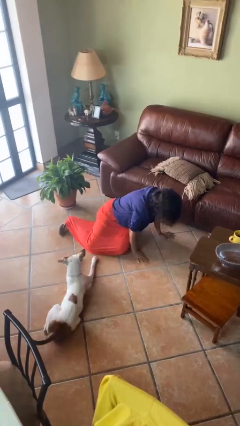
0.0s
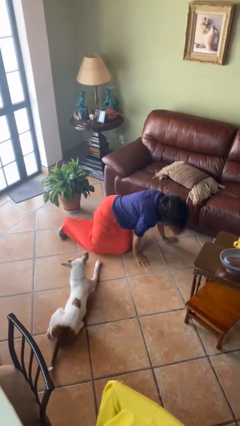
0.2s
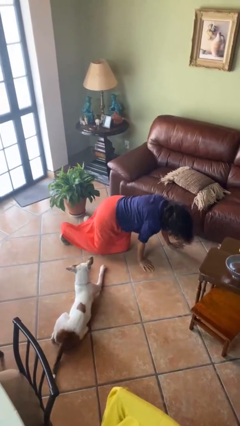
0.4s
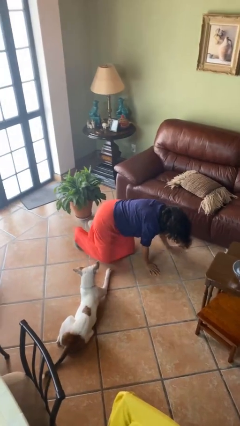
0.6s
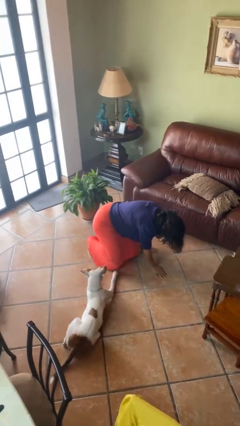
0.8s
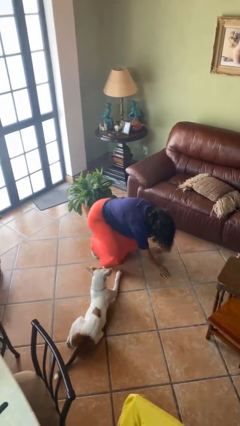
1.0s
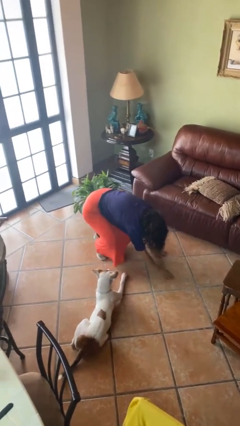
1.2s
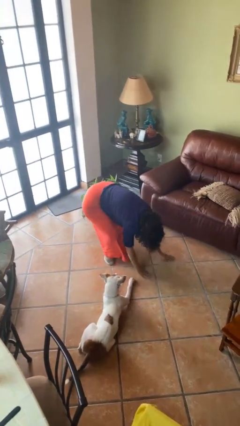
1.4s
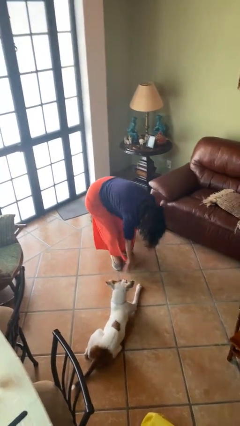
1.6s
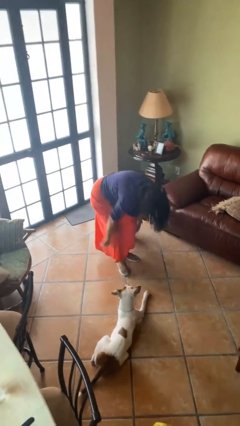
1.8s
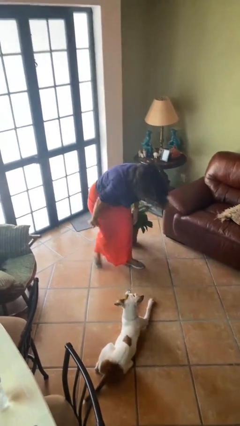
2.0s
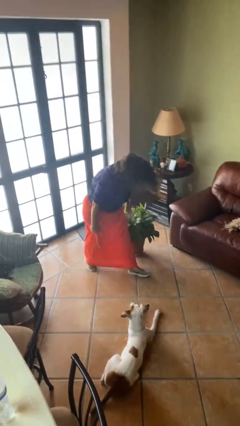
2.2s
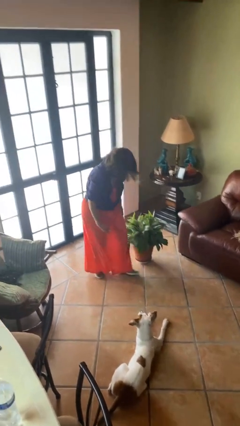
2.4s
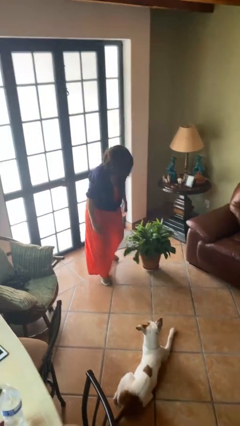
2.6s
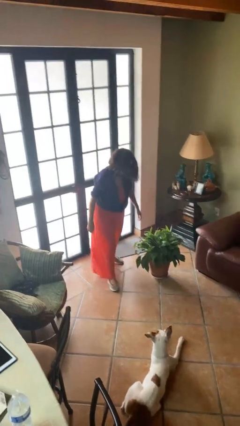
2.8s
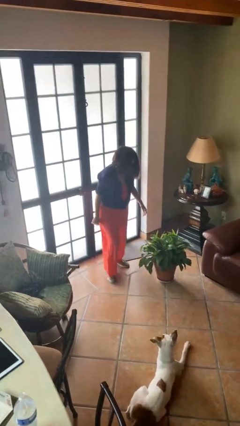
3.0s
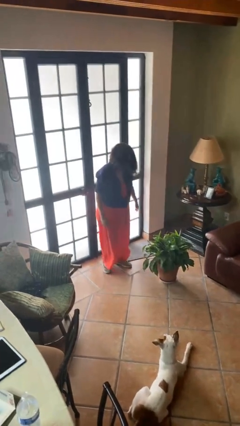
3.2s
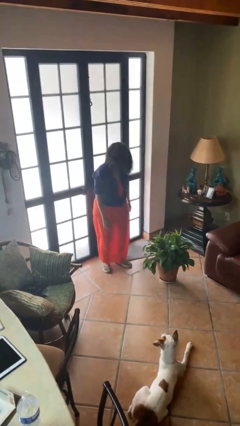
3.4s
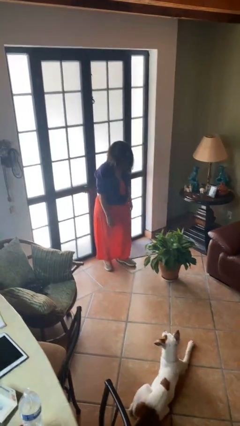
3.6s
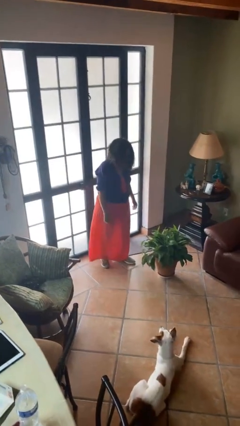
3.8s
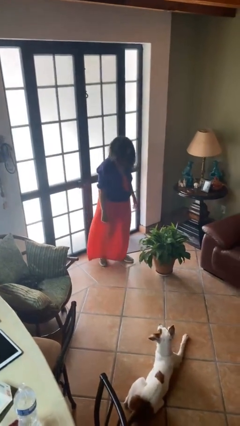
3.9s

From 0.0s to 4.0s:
person stands up from floor

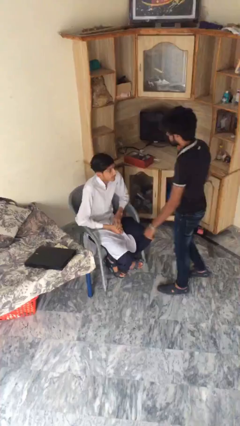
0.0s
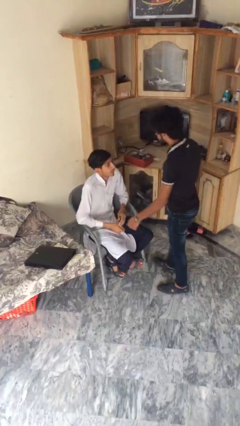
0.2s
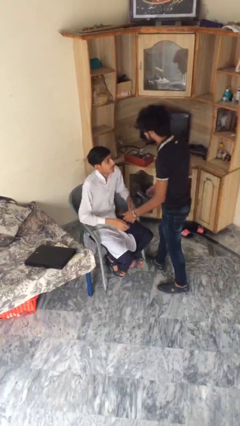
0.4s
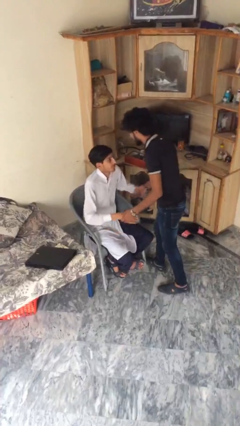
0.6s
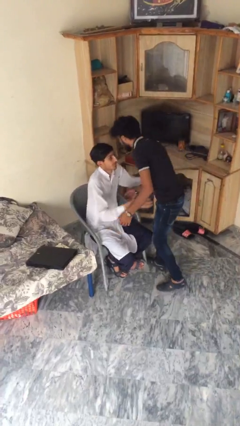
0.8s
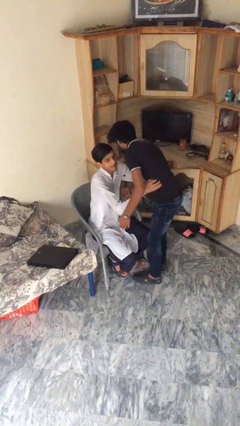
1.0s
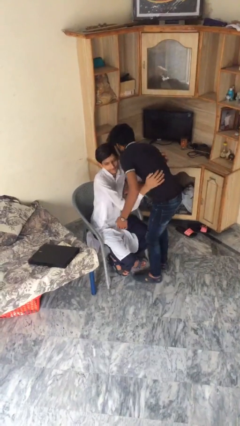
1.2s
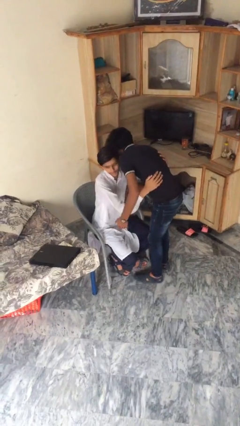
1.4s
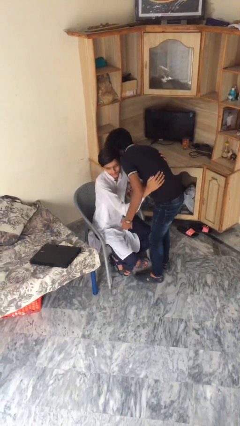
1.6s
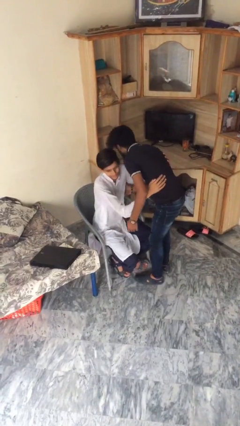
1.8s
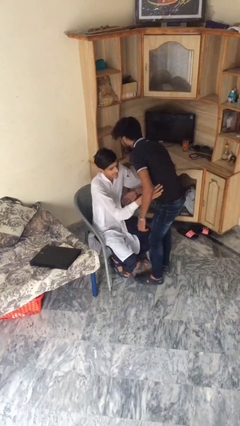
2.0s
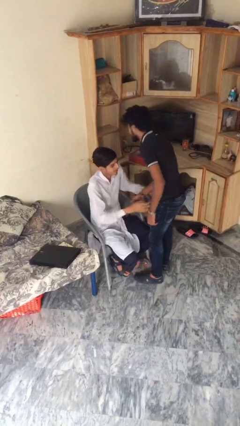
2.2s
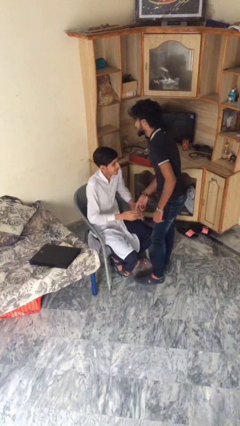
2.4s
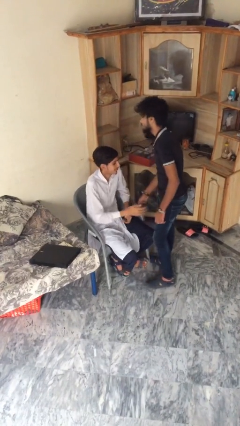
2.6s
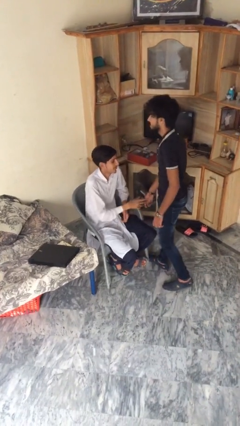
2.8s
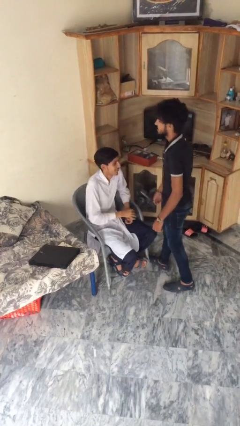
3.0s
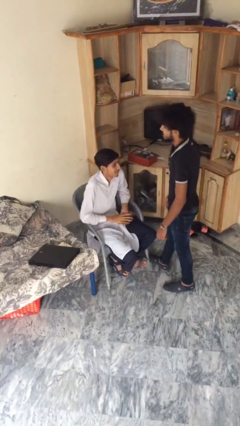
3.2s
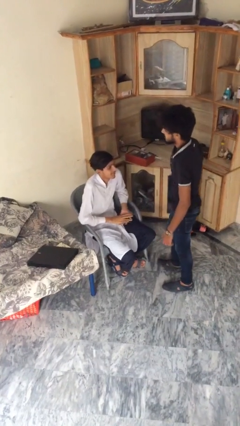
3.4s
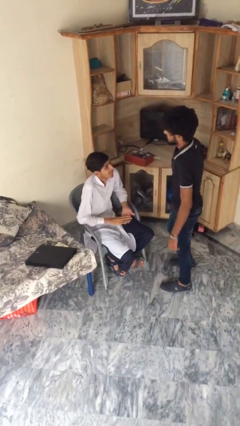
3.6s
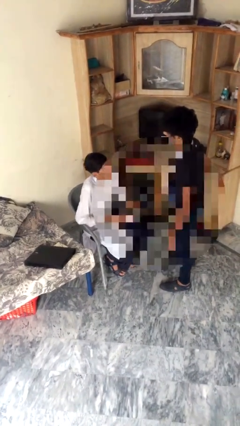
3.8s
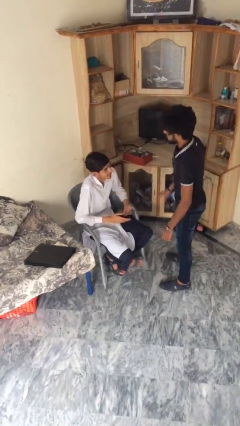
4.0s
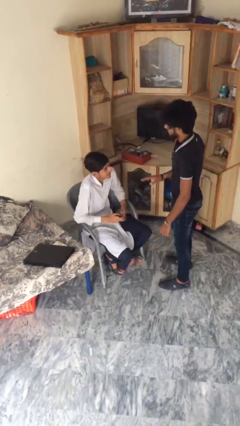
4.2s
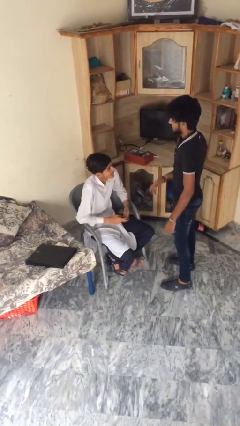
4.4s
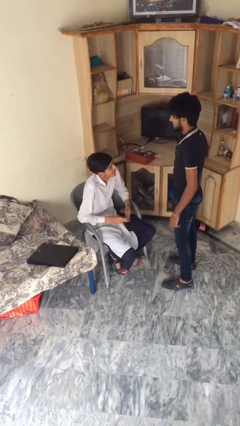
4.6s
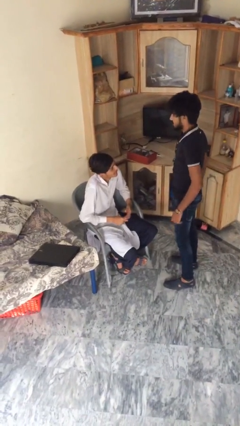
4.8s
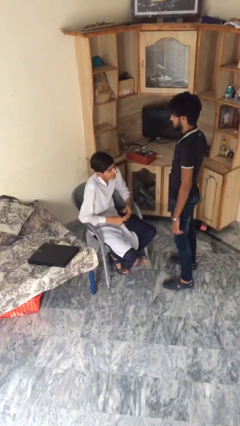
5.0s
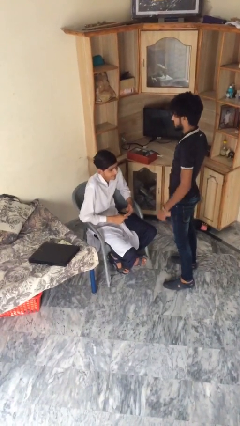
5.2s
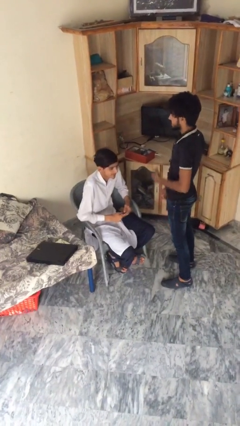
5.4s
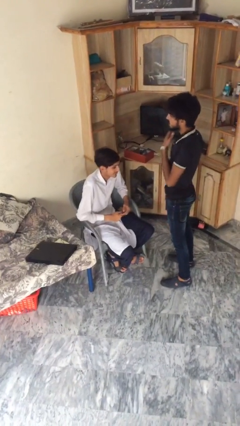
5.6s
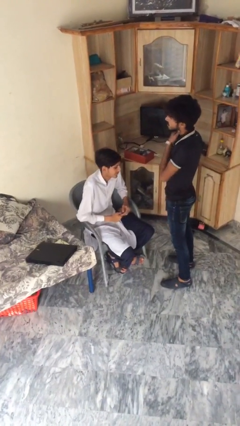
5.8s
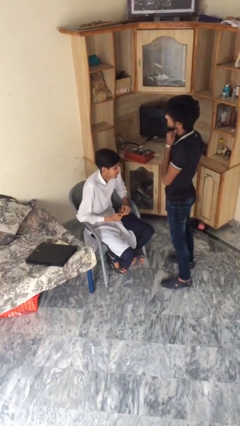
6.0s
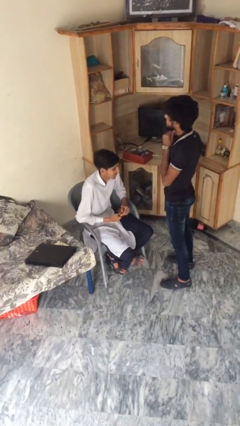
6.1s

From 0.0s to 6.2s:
person embraces person

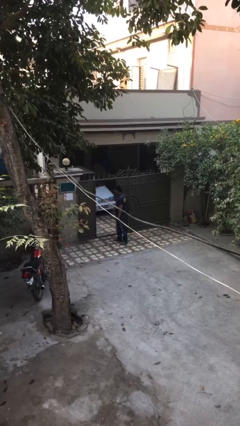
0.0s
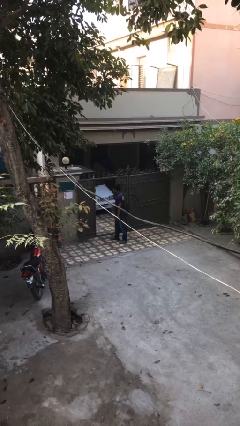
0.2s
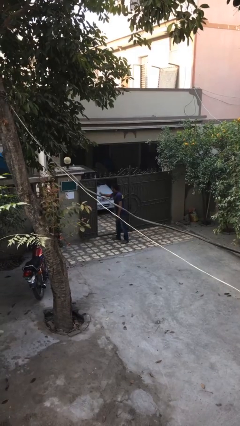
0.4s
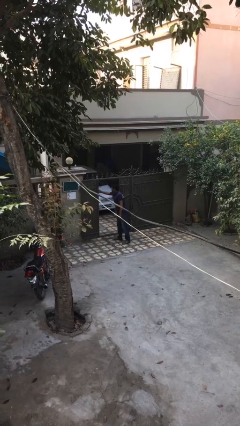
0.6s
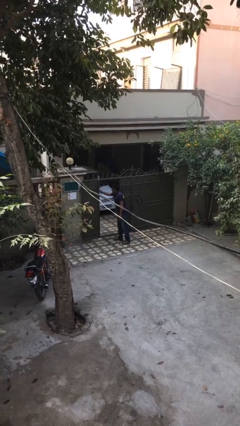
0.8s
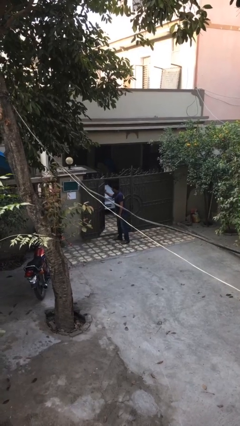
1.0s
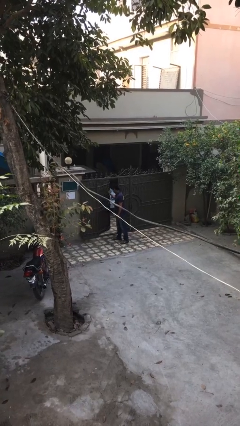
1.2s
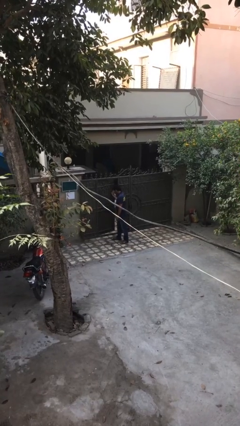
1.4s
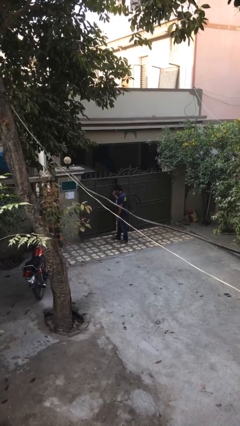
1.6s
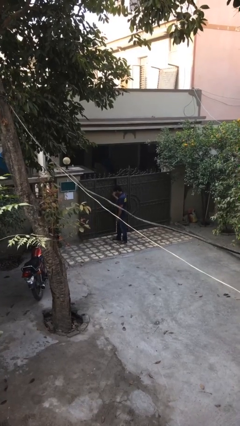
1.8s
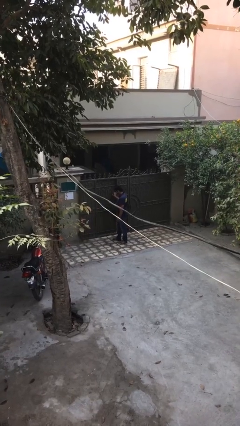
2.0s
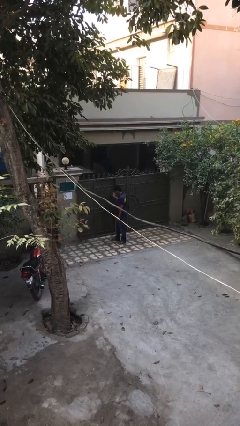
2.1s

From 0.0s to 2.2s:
person closes facility door

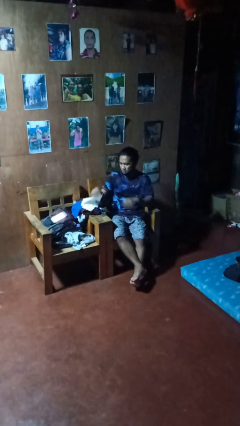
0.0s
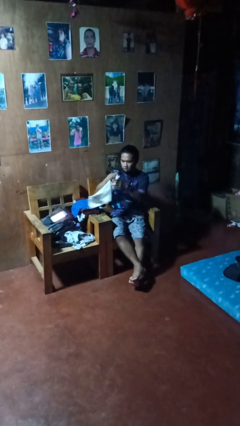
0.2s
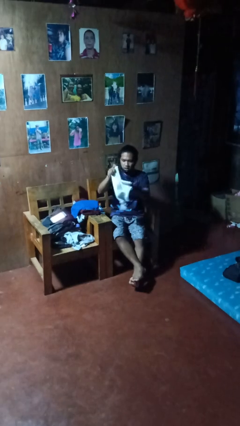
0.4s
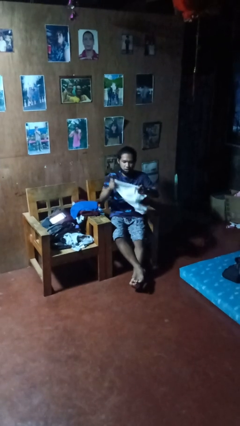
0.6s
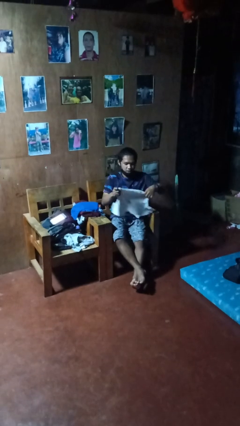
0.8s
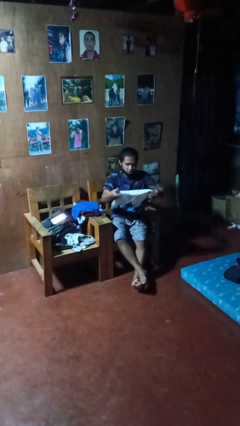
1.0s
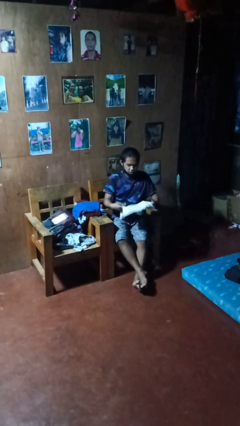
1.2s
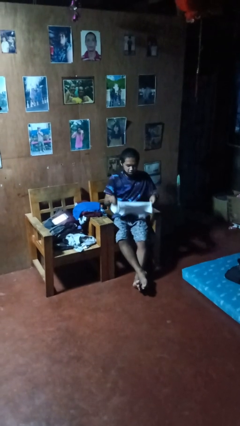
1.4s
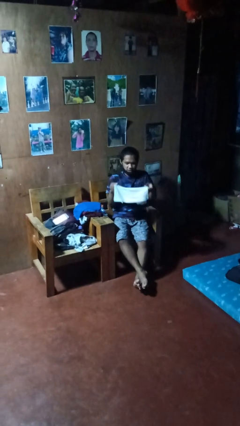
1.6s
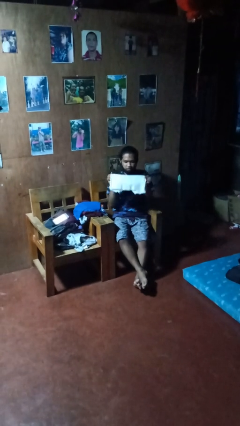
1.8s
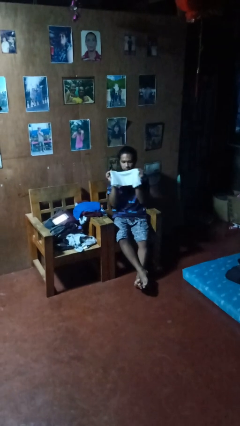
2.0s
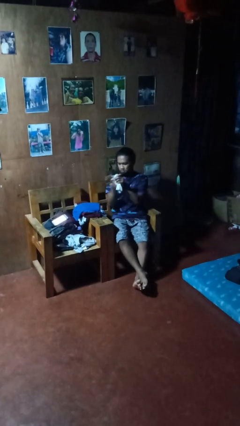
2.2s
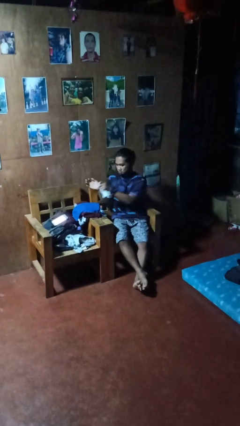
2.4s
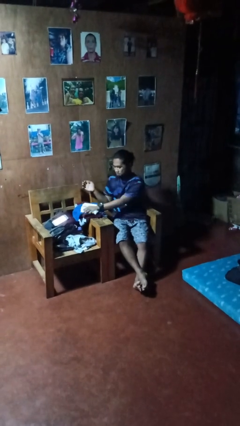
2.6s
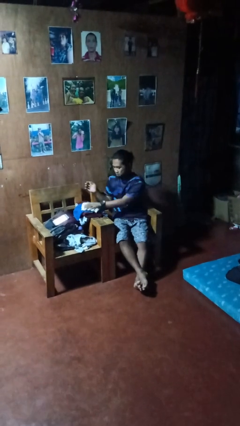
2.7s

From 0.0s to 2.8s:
person folds shirt

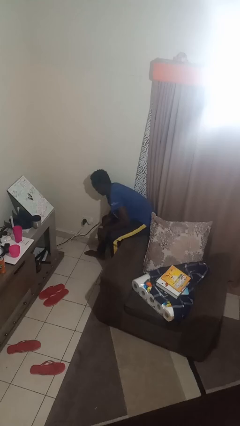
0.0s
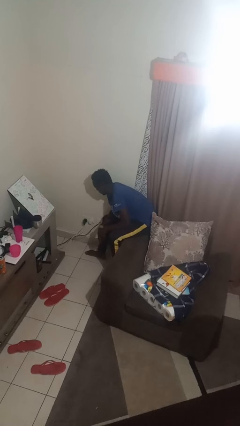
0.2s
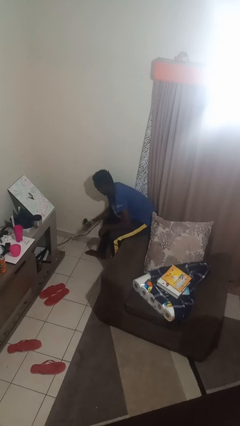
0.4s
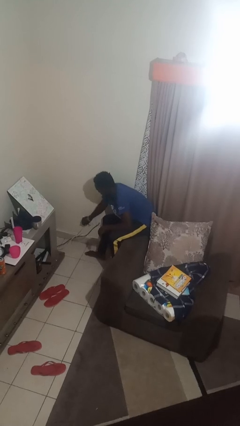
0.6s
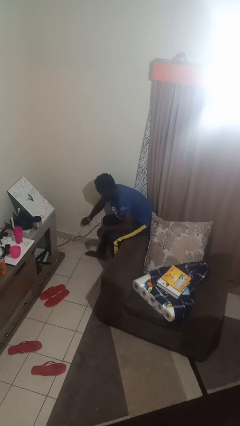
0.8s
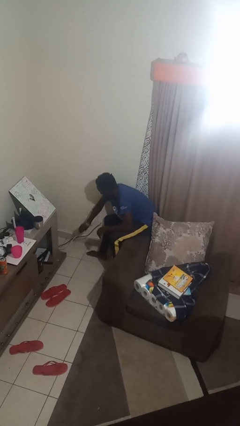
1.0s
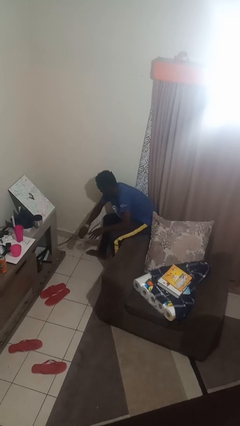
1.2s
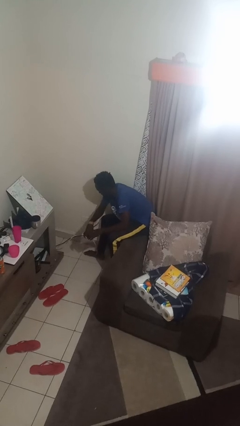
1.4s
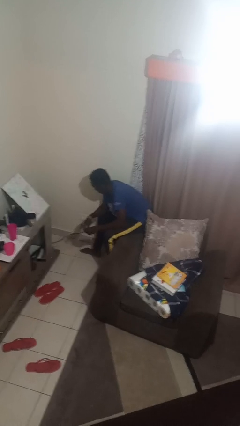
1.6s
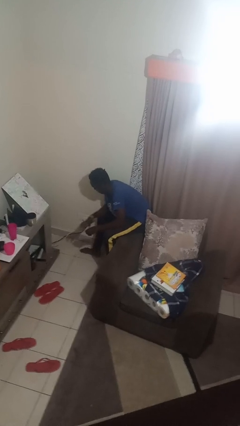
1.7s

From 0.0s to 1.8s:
person unplugs from electrical socket

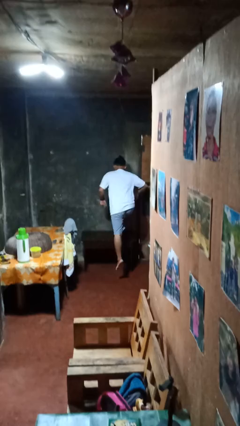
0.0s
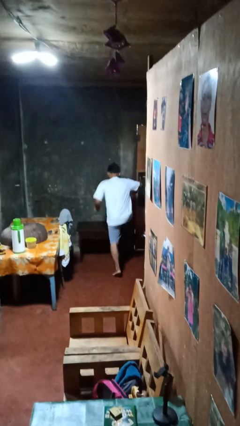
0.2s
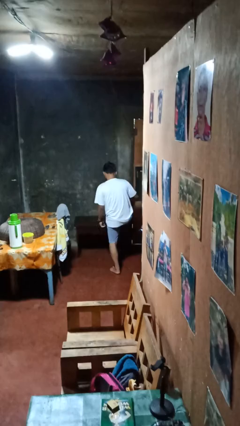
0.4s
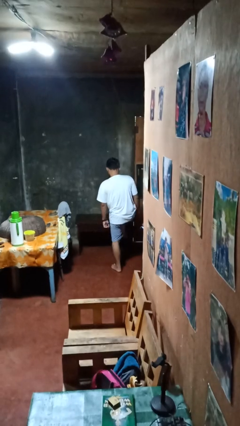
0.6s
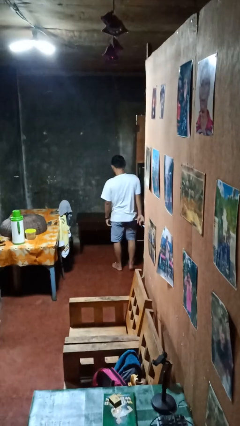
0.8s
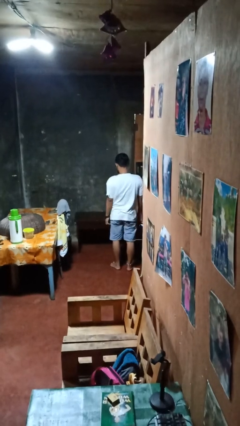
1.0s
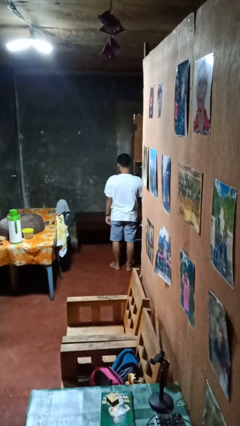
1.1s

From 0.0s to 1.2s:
person climbs off table
